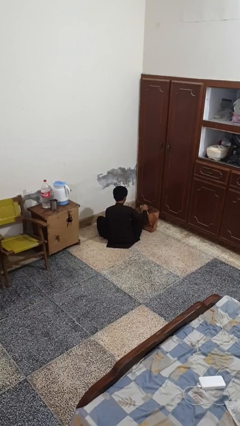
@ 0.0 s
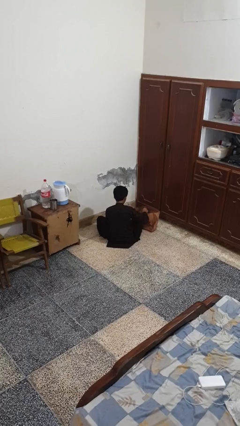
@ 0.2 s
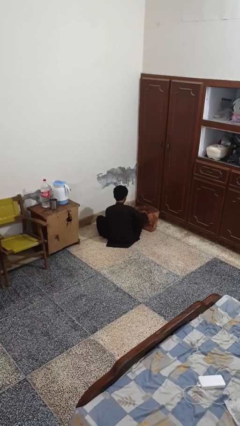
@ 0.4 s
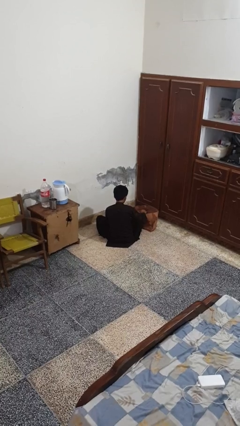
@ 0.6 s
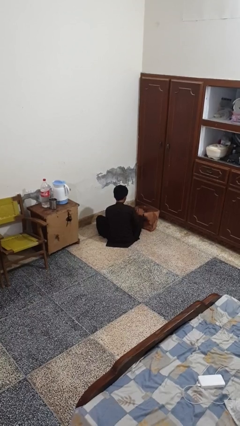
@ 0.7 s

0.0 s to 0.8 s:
person puts object into bag

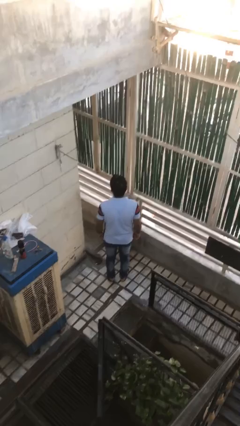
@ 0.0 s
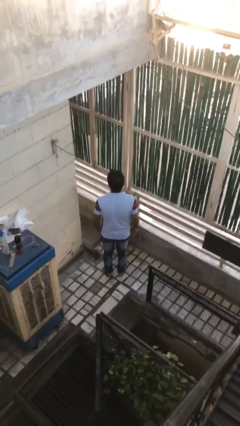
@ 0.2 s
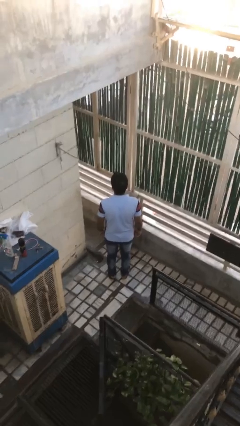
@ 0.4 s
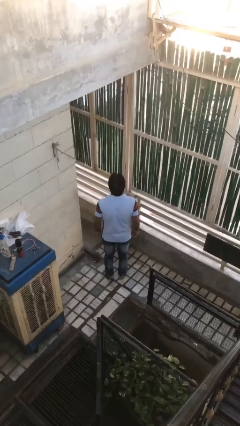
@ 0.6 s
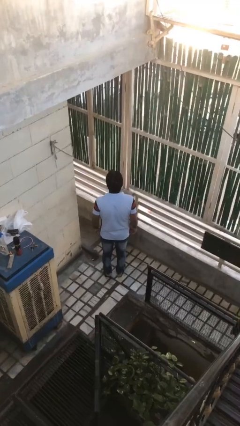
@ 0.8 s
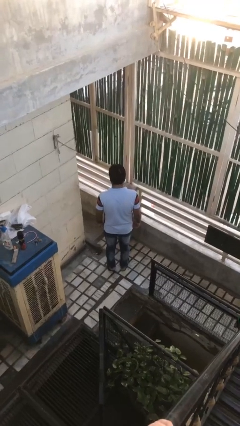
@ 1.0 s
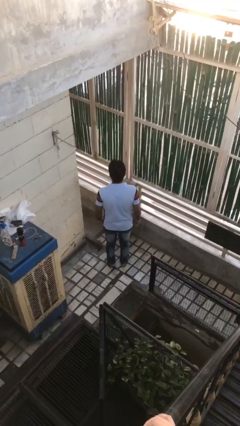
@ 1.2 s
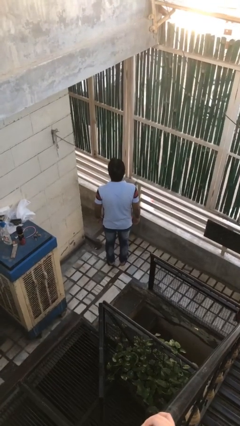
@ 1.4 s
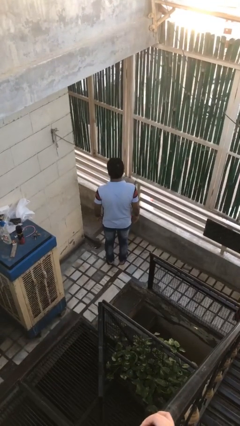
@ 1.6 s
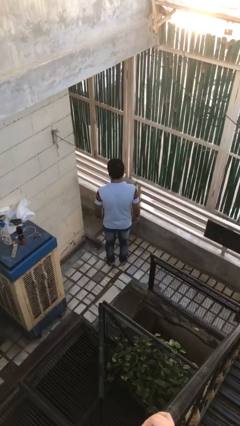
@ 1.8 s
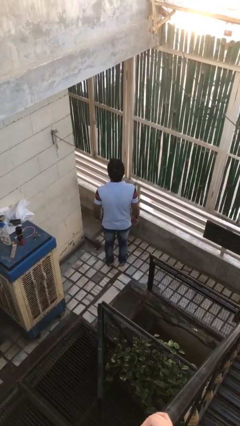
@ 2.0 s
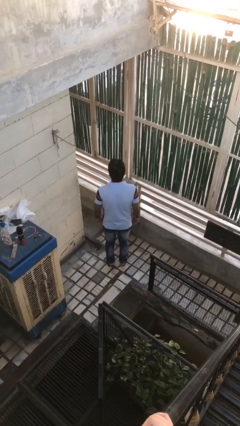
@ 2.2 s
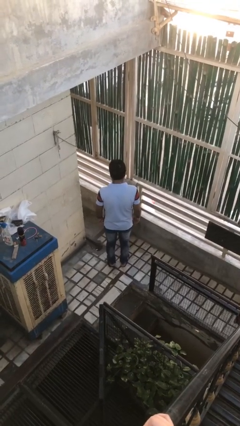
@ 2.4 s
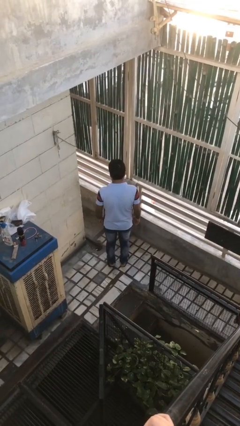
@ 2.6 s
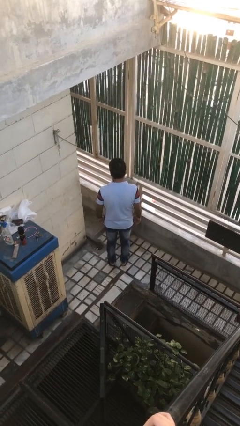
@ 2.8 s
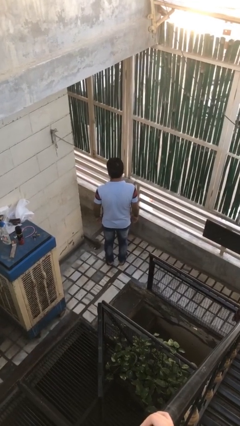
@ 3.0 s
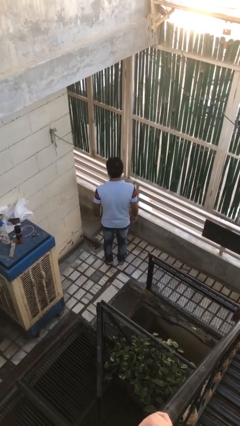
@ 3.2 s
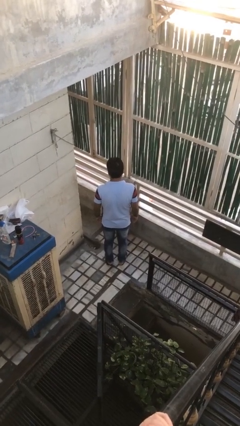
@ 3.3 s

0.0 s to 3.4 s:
person nods head

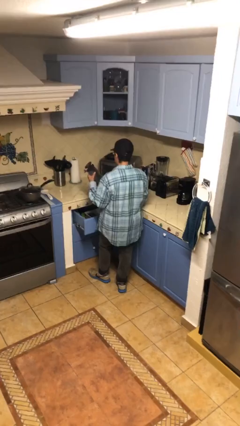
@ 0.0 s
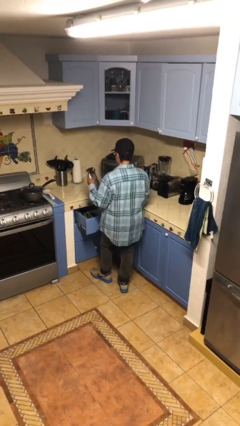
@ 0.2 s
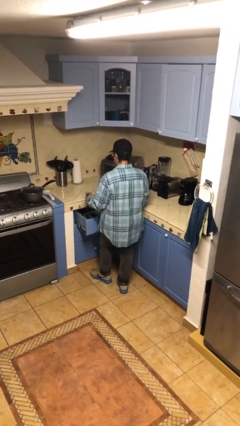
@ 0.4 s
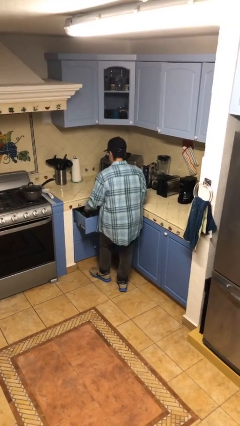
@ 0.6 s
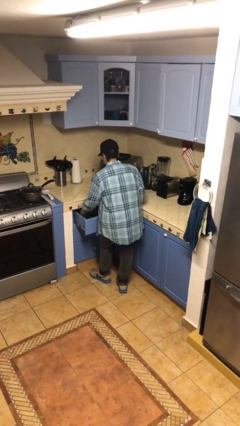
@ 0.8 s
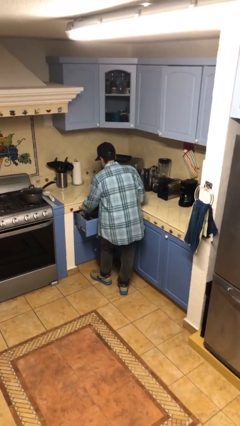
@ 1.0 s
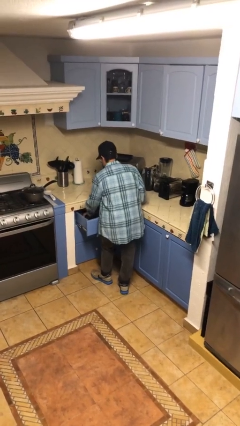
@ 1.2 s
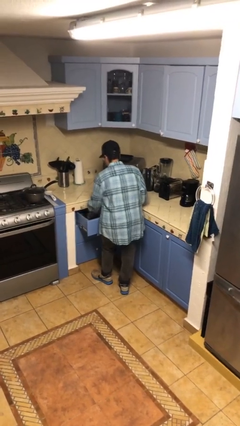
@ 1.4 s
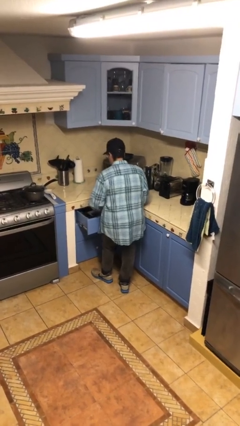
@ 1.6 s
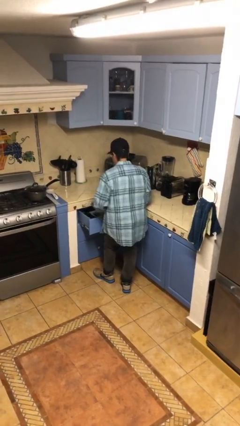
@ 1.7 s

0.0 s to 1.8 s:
person puts object into kitchen drawer

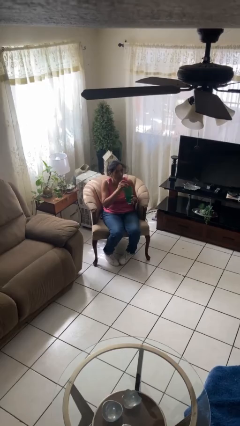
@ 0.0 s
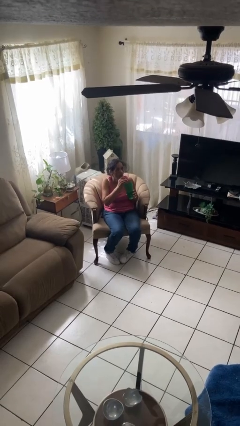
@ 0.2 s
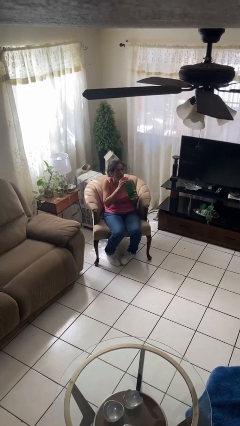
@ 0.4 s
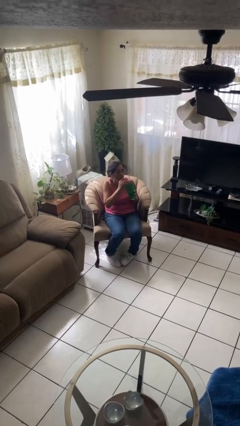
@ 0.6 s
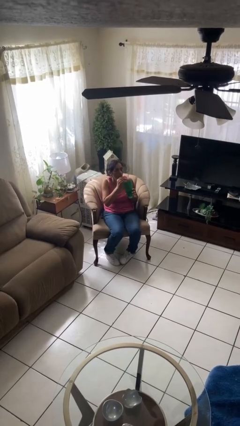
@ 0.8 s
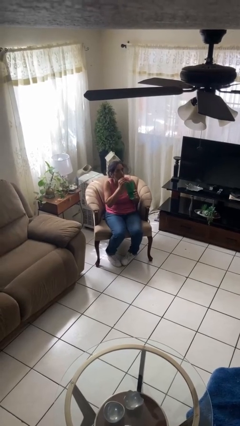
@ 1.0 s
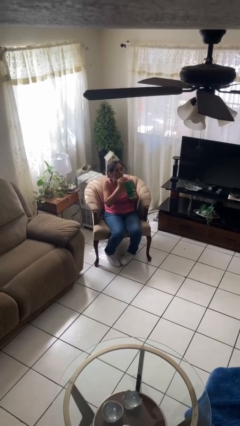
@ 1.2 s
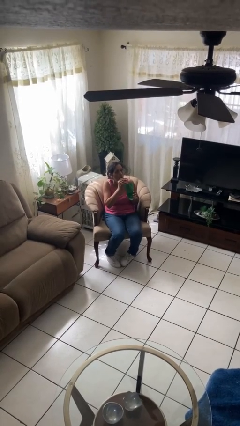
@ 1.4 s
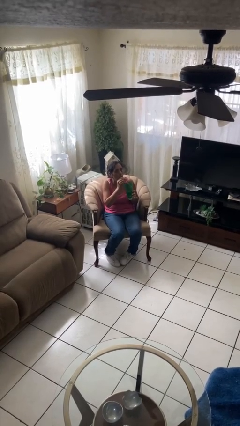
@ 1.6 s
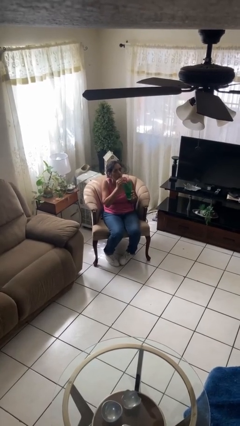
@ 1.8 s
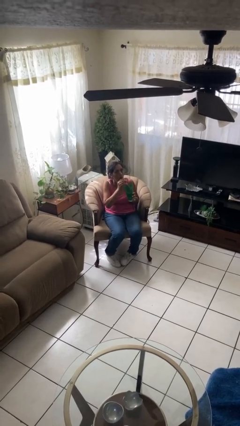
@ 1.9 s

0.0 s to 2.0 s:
person drinks from straw

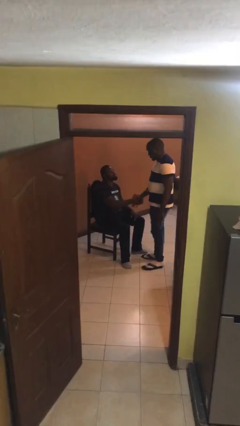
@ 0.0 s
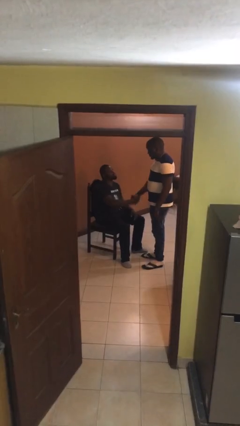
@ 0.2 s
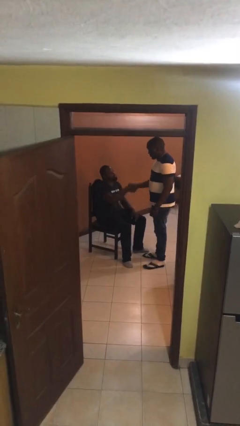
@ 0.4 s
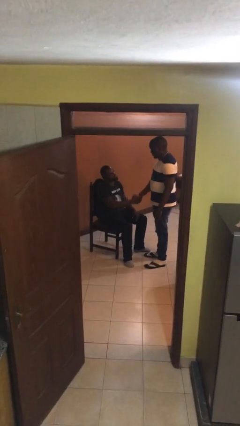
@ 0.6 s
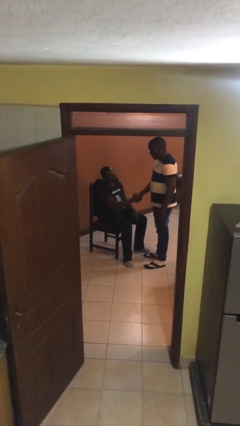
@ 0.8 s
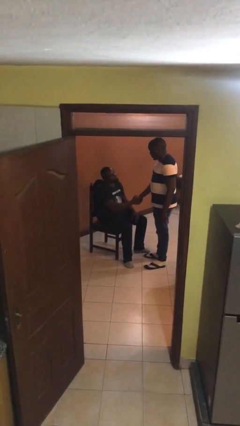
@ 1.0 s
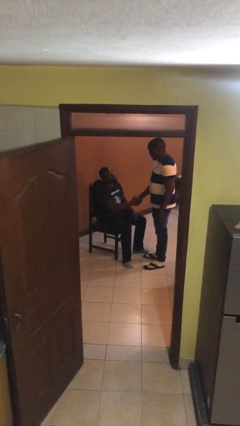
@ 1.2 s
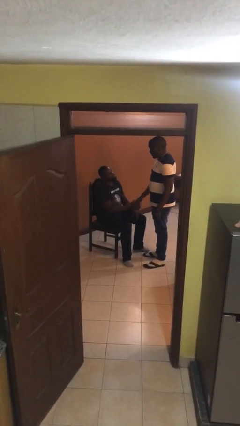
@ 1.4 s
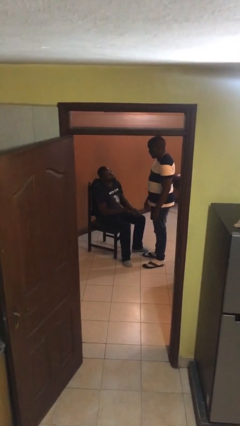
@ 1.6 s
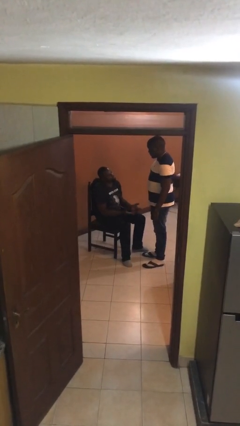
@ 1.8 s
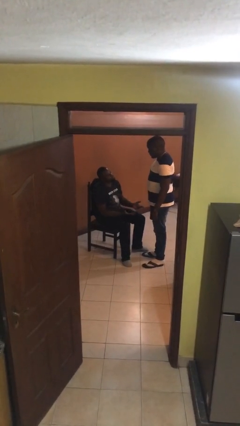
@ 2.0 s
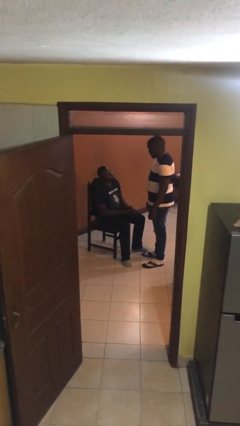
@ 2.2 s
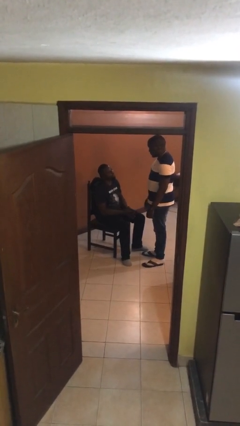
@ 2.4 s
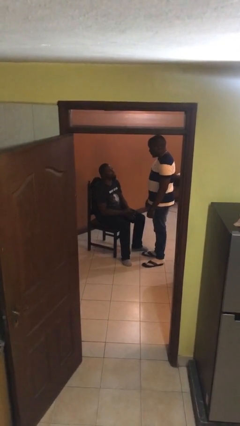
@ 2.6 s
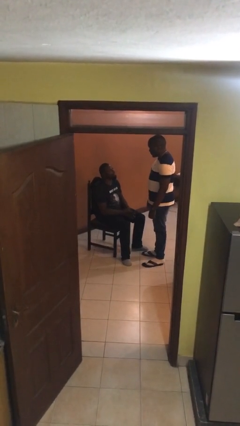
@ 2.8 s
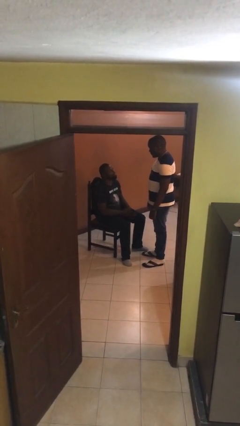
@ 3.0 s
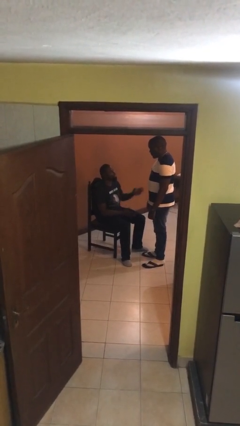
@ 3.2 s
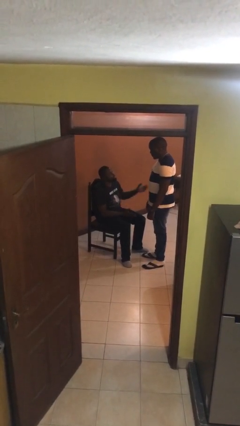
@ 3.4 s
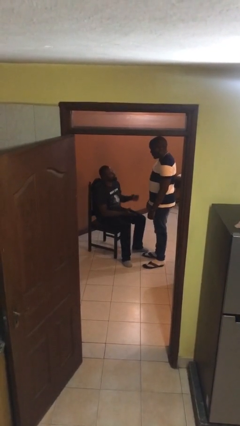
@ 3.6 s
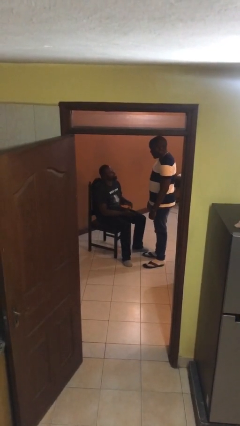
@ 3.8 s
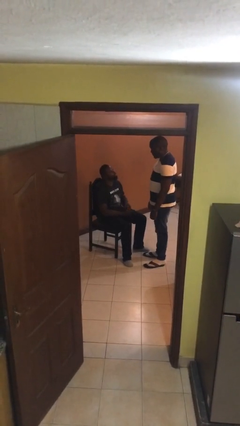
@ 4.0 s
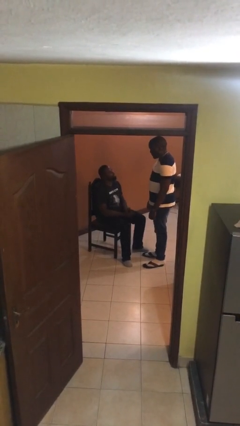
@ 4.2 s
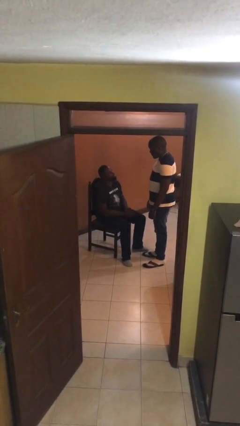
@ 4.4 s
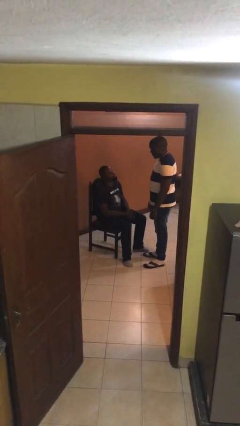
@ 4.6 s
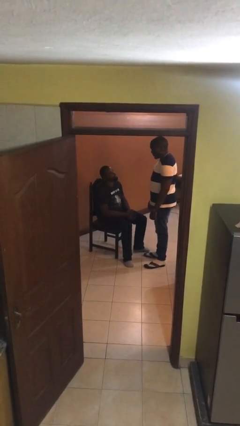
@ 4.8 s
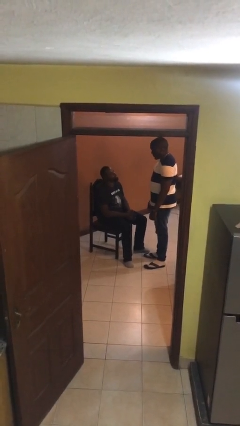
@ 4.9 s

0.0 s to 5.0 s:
person shakes hand

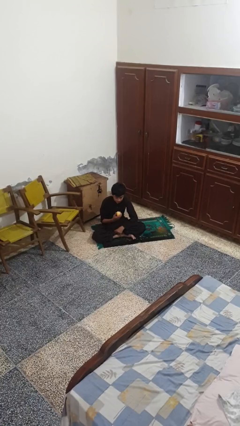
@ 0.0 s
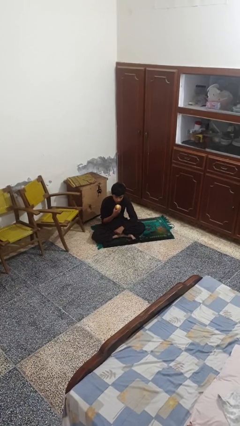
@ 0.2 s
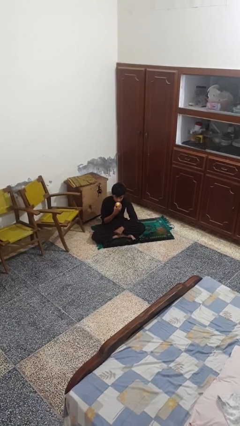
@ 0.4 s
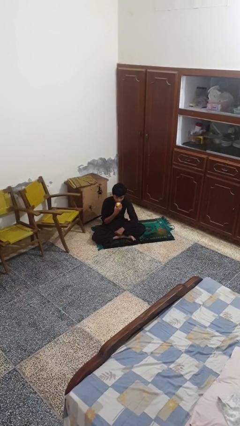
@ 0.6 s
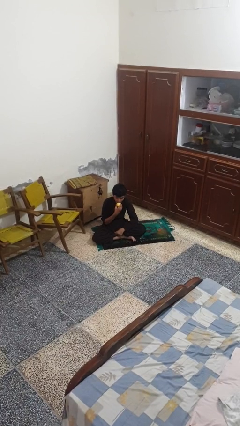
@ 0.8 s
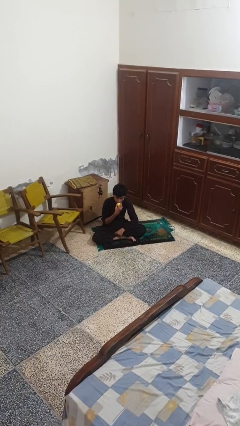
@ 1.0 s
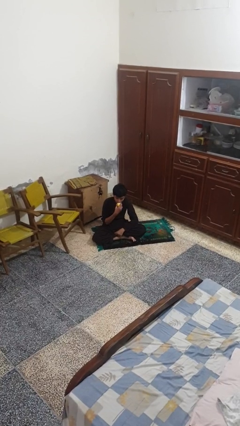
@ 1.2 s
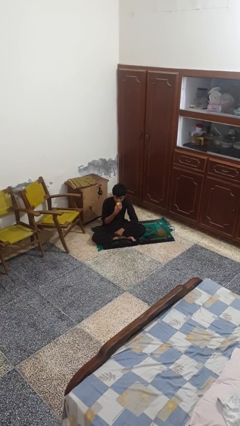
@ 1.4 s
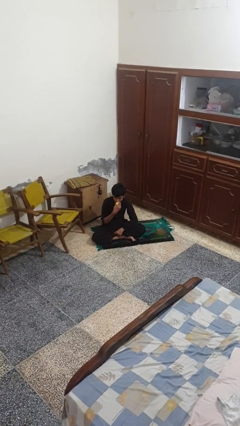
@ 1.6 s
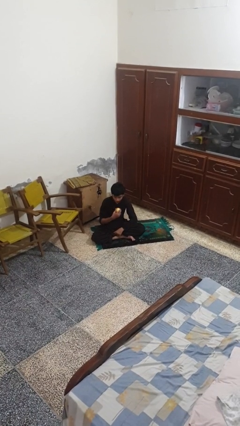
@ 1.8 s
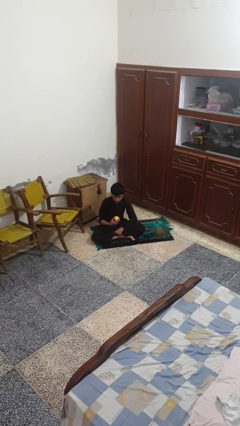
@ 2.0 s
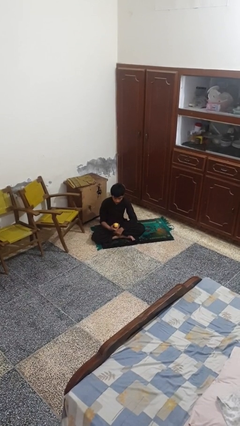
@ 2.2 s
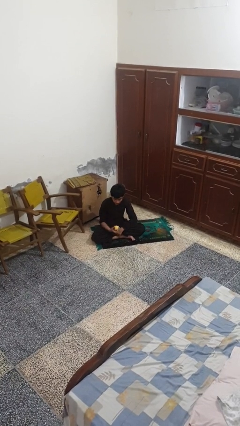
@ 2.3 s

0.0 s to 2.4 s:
person eats apple

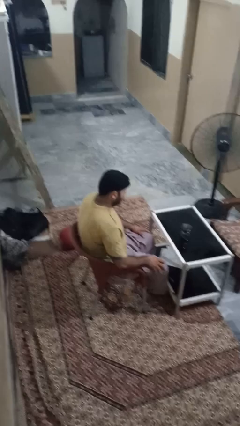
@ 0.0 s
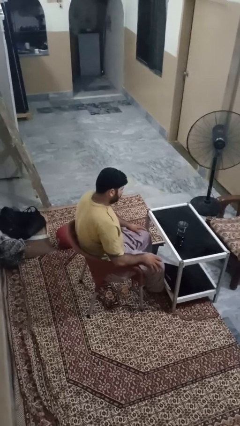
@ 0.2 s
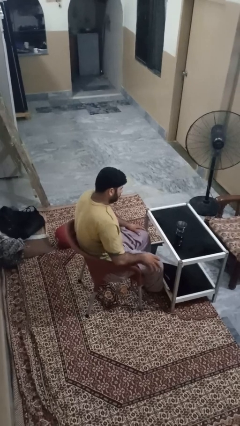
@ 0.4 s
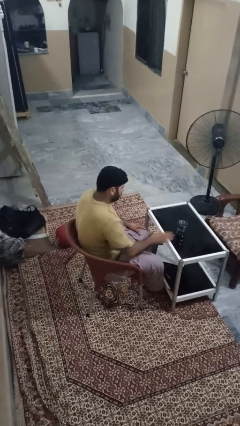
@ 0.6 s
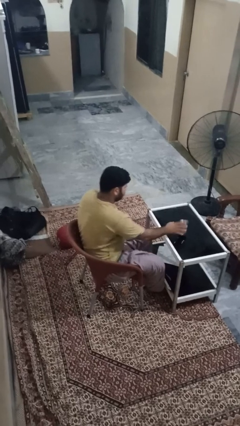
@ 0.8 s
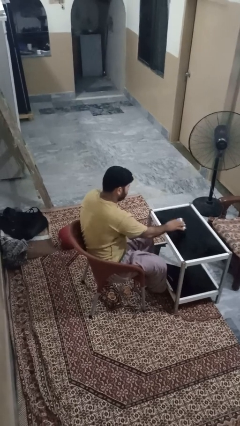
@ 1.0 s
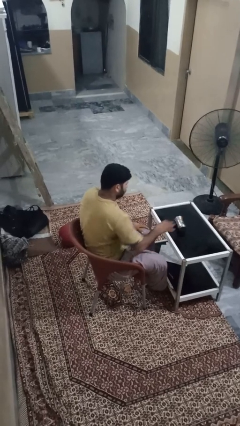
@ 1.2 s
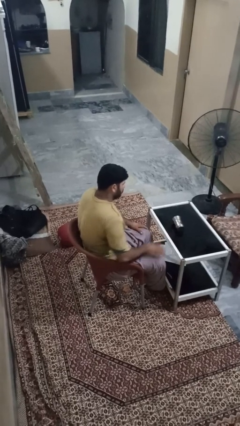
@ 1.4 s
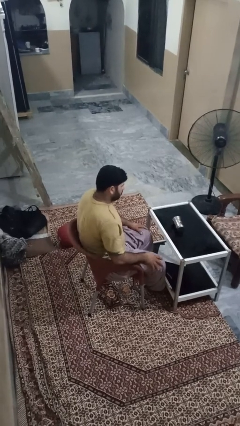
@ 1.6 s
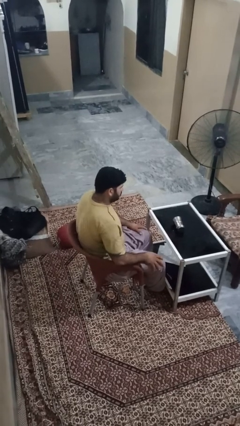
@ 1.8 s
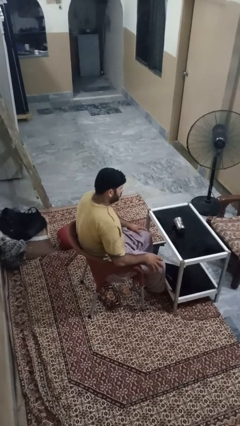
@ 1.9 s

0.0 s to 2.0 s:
person knocks over glass
